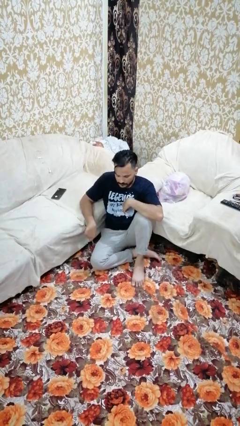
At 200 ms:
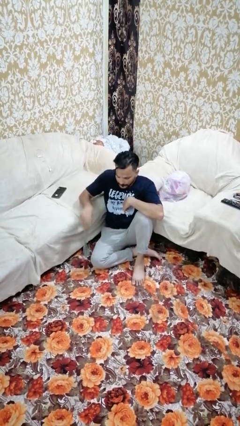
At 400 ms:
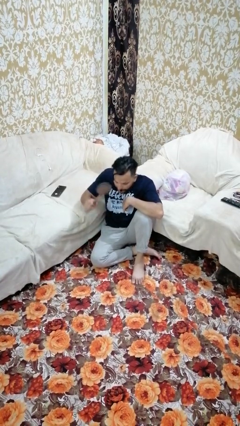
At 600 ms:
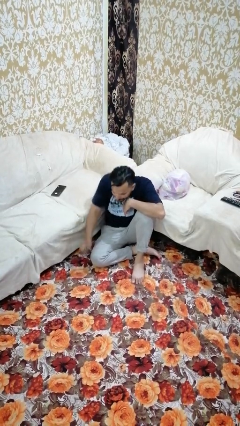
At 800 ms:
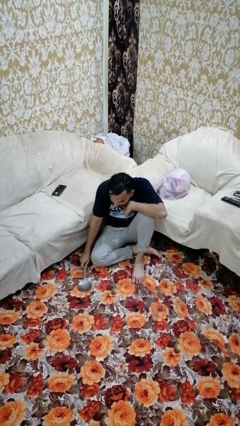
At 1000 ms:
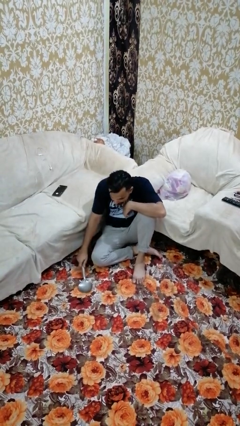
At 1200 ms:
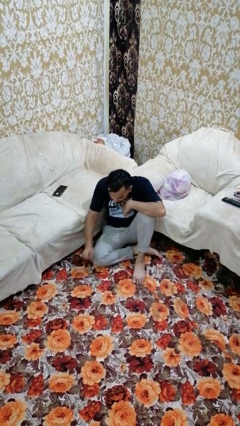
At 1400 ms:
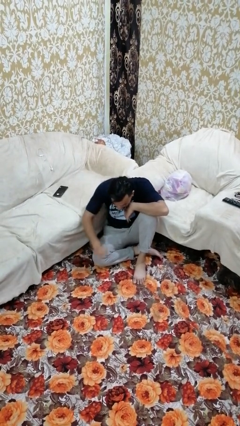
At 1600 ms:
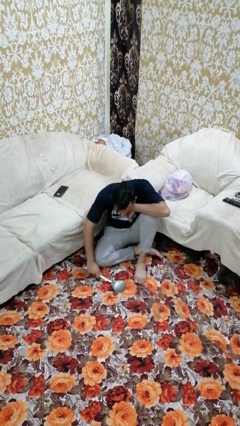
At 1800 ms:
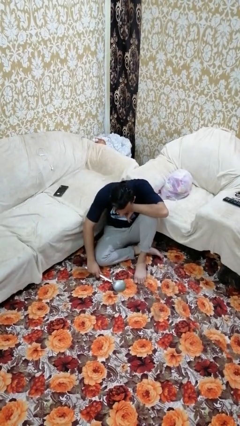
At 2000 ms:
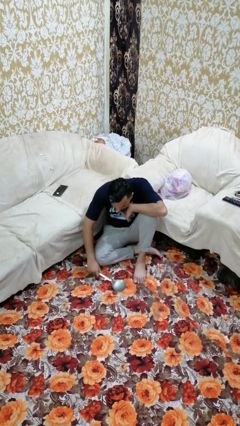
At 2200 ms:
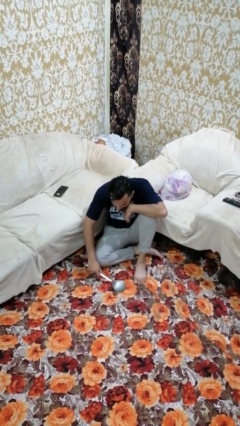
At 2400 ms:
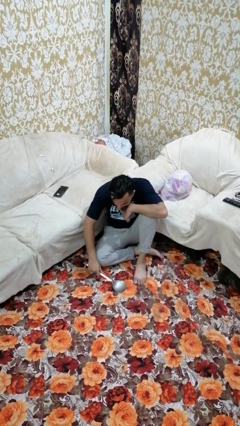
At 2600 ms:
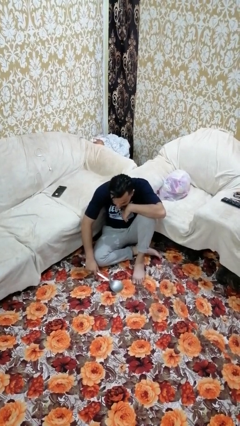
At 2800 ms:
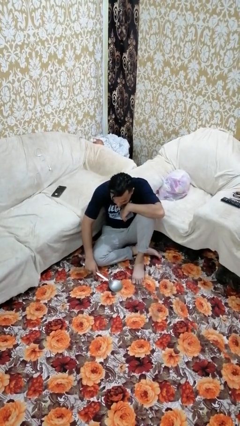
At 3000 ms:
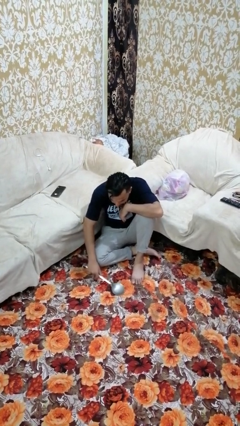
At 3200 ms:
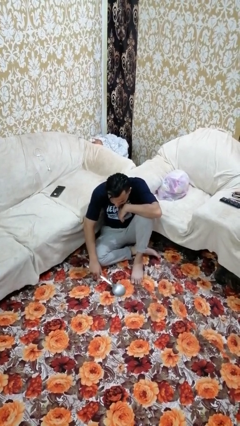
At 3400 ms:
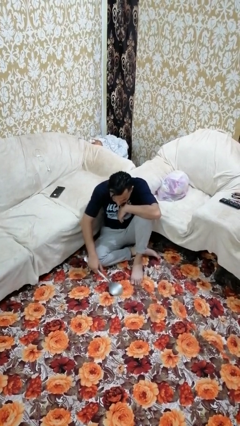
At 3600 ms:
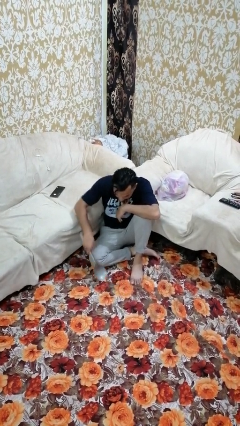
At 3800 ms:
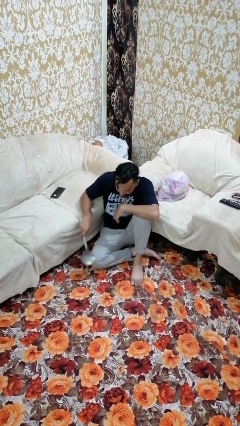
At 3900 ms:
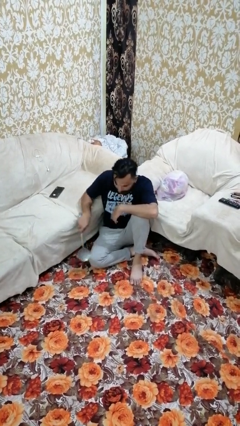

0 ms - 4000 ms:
person swats bug

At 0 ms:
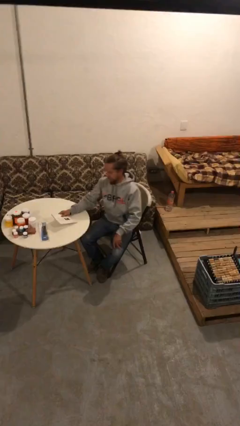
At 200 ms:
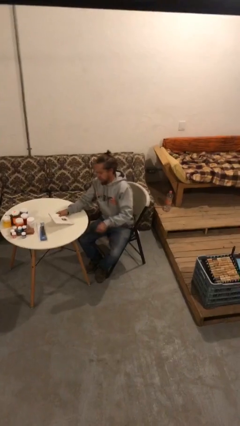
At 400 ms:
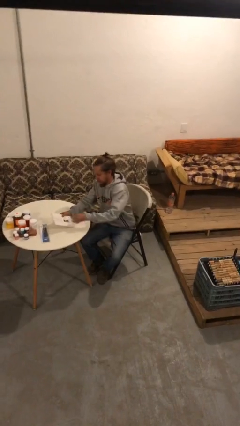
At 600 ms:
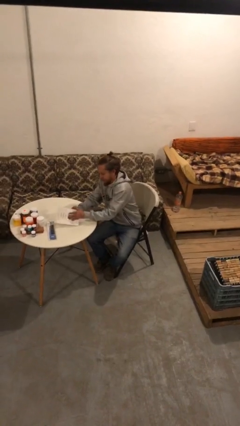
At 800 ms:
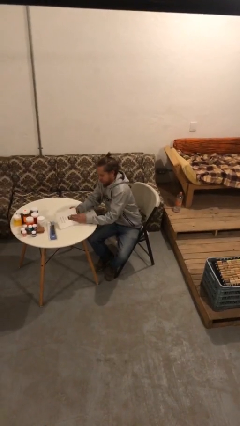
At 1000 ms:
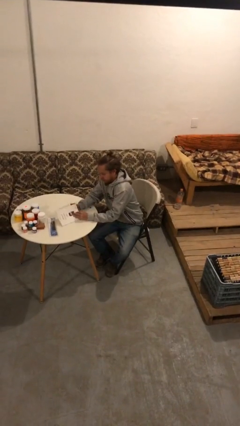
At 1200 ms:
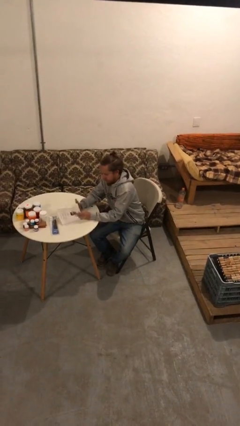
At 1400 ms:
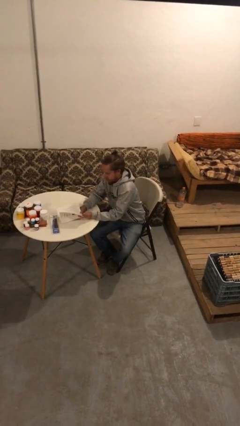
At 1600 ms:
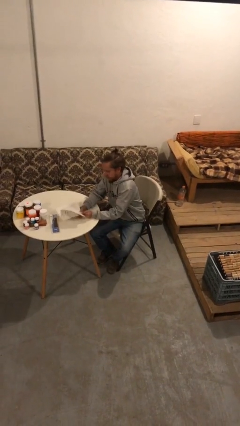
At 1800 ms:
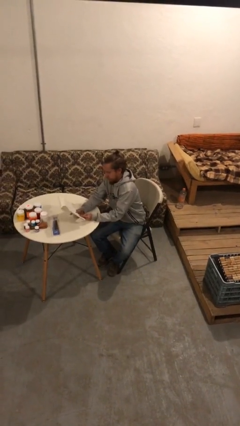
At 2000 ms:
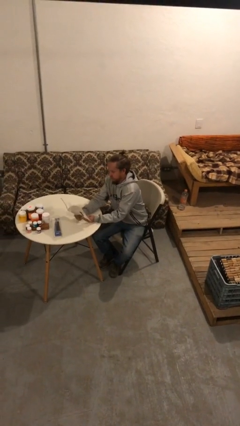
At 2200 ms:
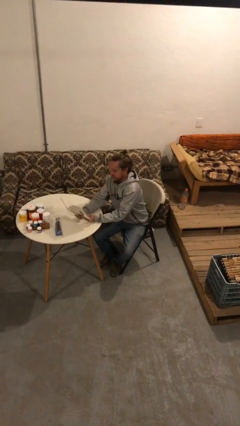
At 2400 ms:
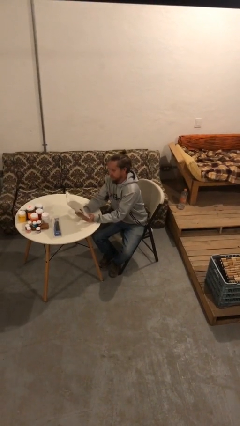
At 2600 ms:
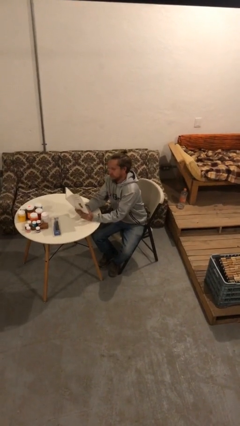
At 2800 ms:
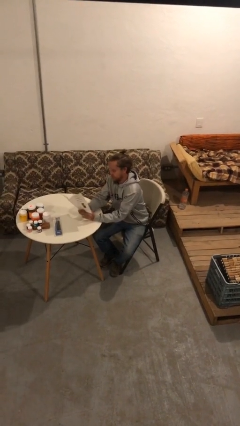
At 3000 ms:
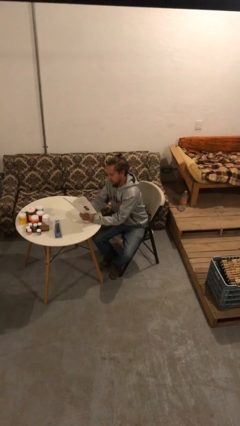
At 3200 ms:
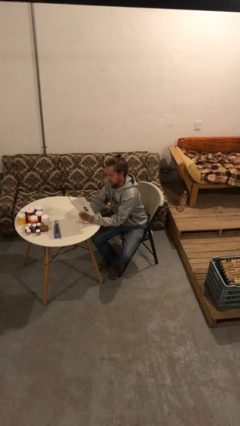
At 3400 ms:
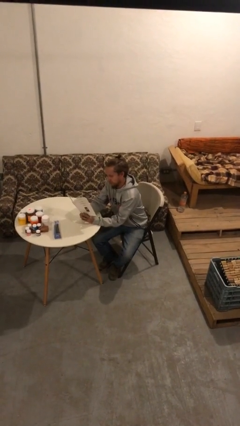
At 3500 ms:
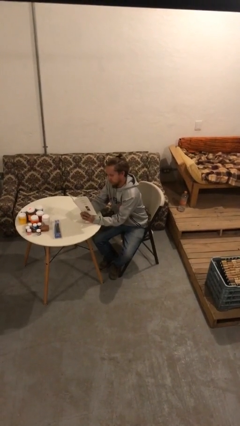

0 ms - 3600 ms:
person reads document

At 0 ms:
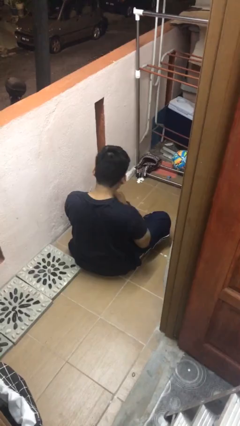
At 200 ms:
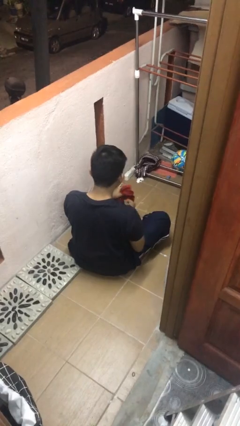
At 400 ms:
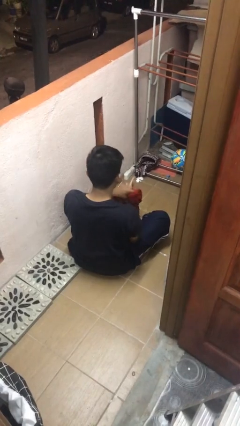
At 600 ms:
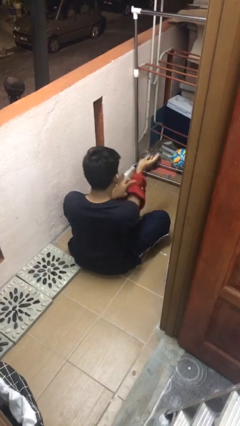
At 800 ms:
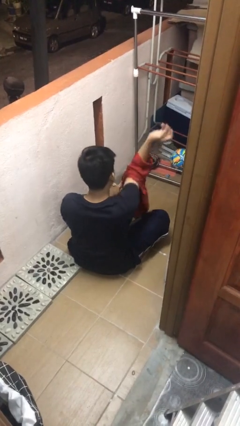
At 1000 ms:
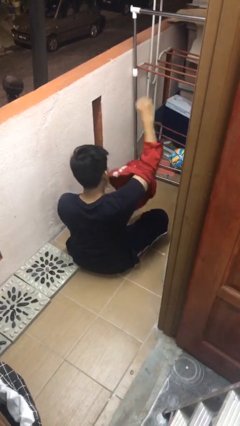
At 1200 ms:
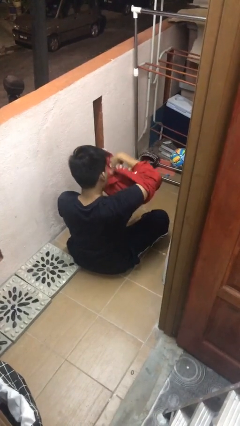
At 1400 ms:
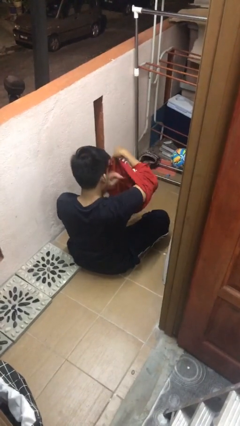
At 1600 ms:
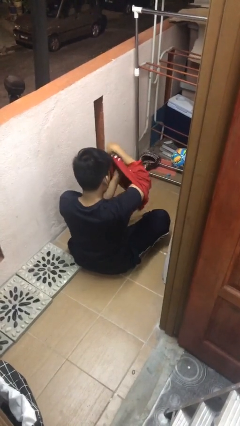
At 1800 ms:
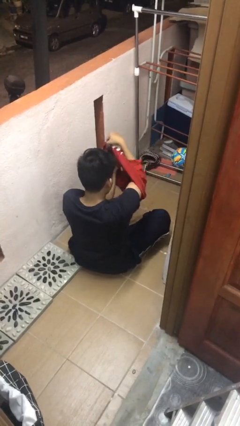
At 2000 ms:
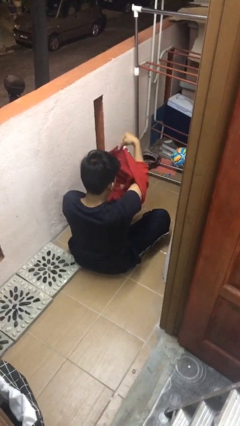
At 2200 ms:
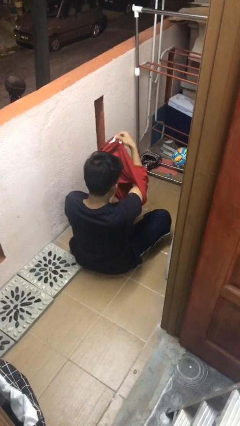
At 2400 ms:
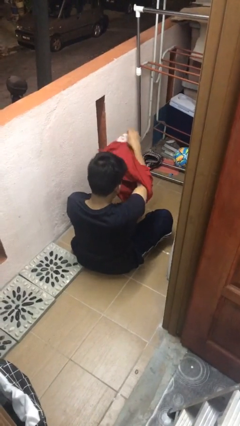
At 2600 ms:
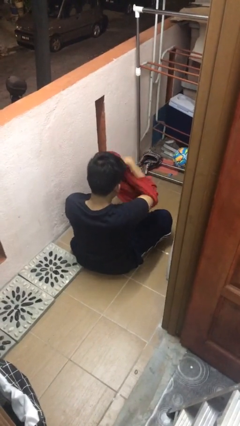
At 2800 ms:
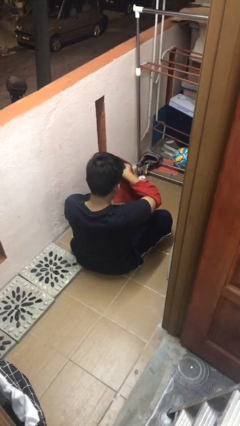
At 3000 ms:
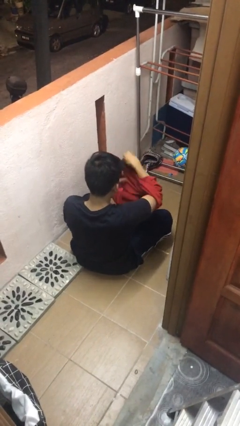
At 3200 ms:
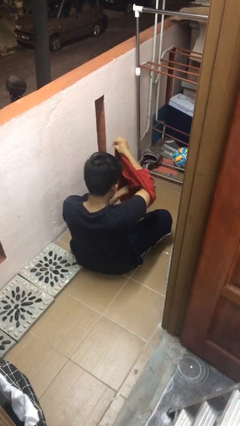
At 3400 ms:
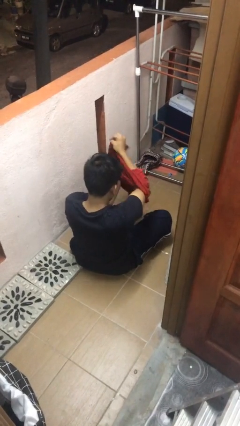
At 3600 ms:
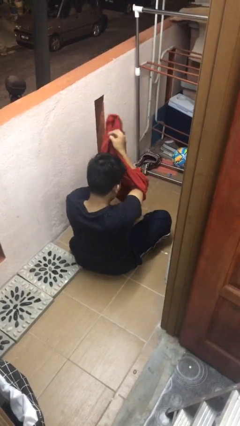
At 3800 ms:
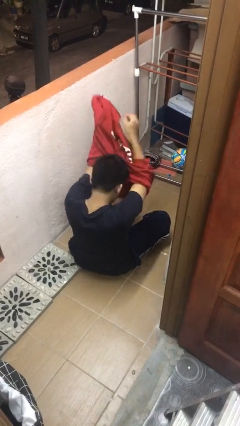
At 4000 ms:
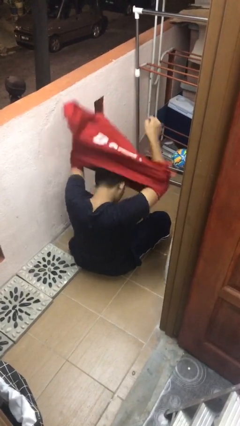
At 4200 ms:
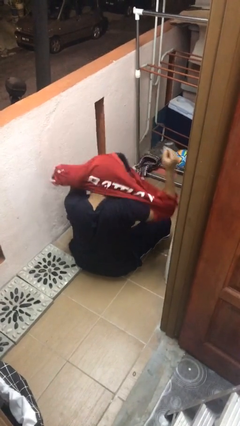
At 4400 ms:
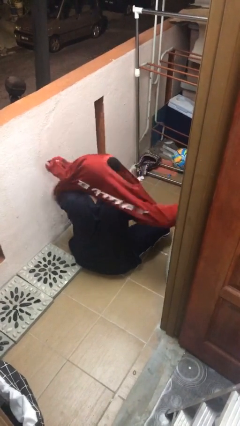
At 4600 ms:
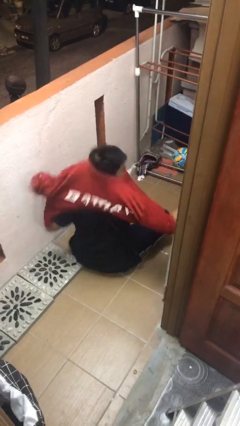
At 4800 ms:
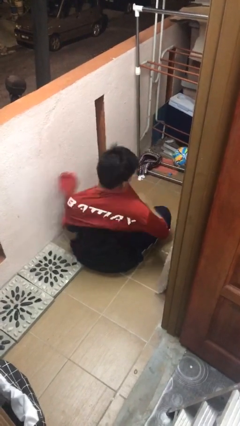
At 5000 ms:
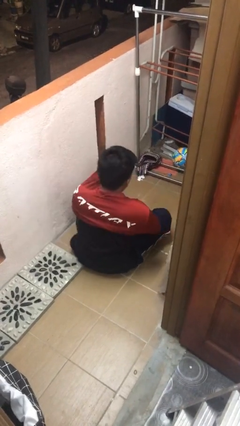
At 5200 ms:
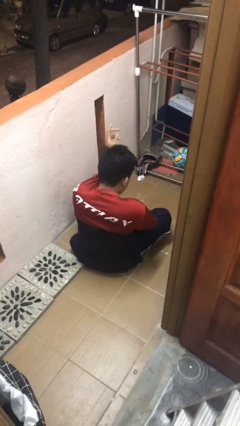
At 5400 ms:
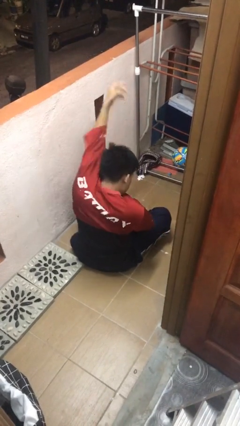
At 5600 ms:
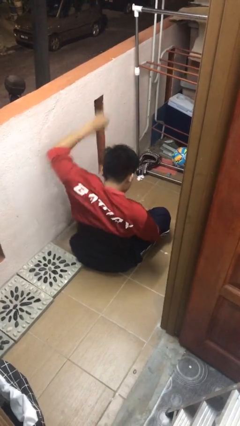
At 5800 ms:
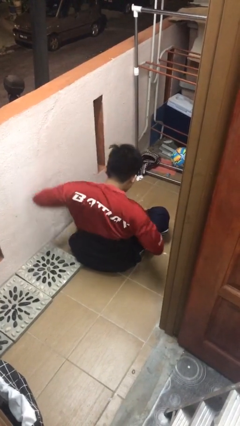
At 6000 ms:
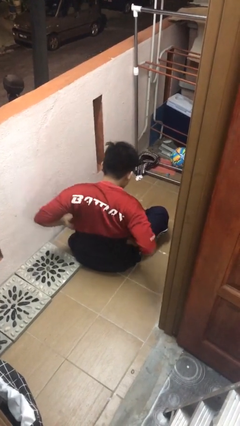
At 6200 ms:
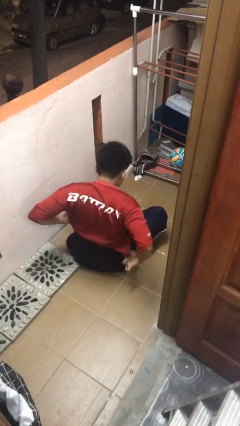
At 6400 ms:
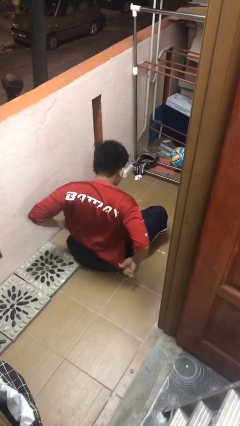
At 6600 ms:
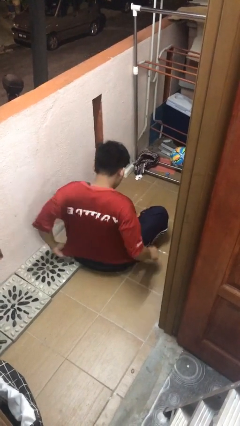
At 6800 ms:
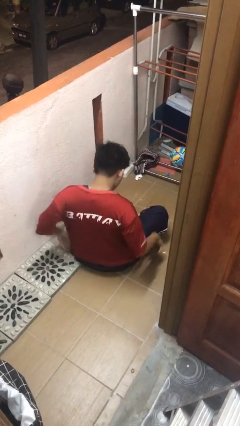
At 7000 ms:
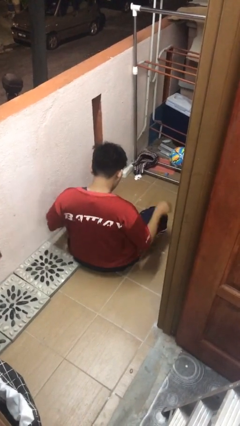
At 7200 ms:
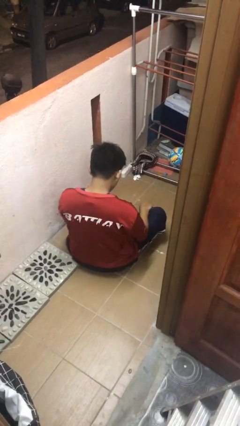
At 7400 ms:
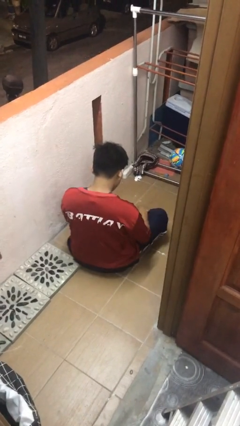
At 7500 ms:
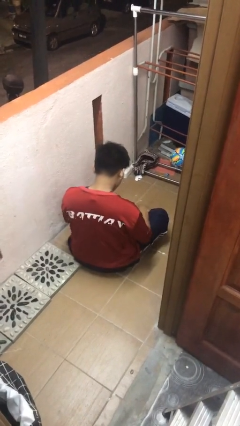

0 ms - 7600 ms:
person puts on shirt

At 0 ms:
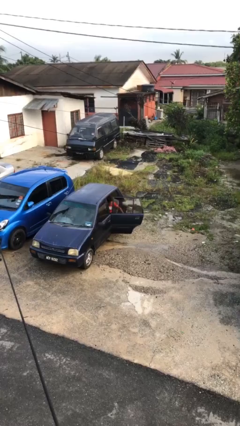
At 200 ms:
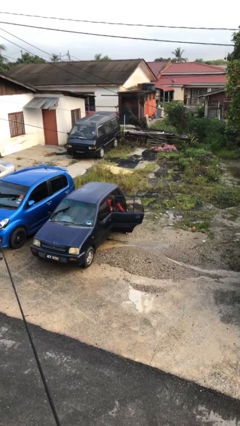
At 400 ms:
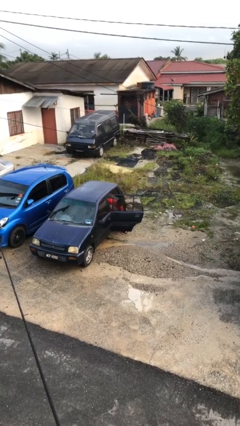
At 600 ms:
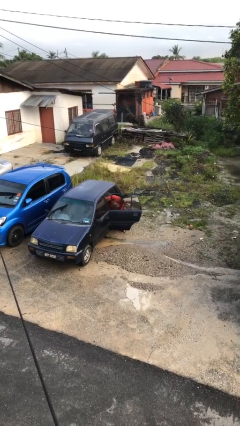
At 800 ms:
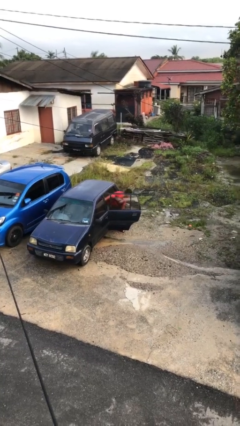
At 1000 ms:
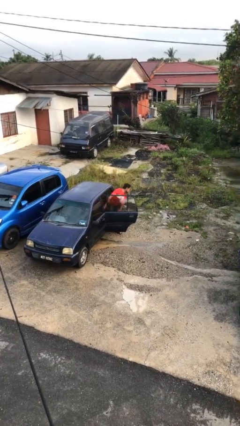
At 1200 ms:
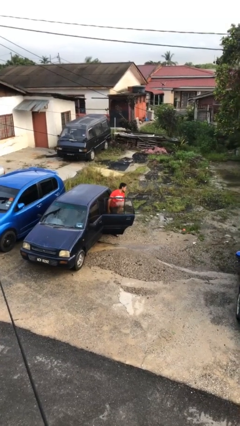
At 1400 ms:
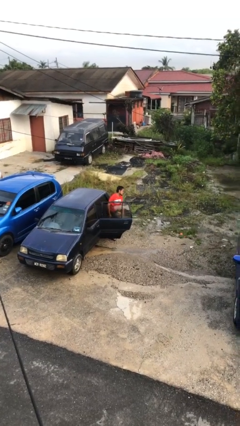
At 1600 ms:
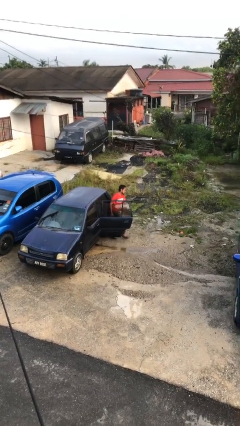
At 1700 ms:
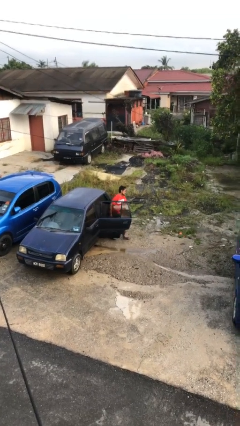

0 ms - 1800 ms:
person exits car

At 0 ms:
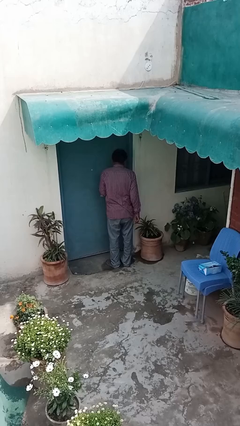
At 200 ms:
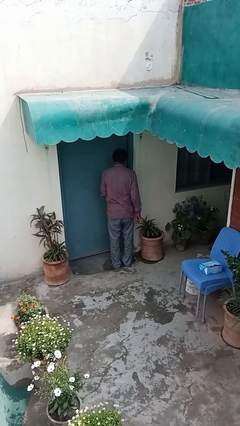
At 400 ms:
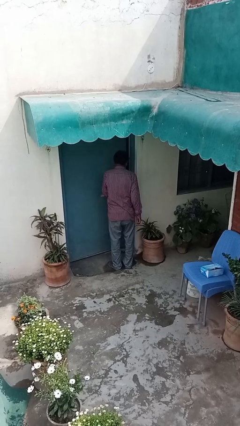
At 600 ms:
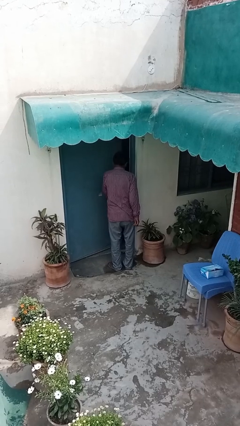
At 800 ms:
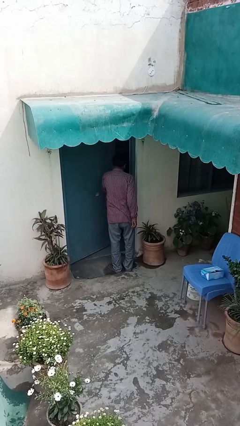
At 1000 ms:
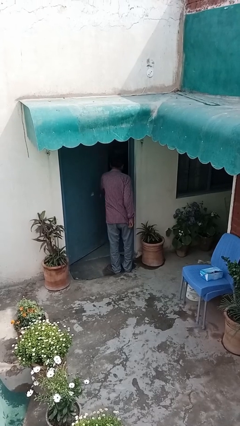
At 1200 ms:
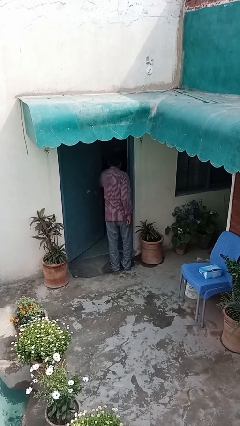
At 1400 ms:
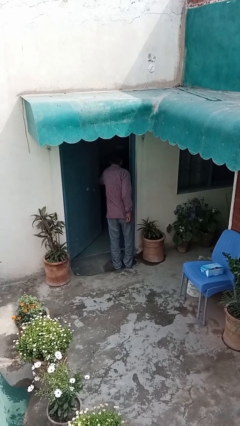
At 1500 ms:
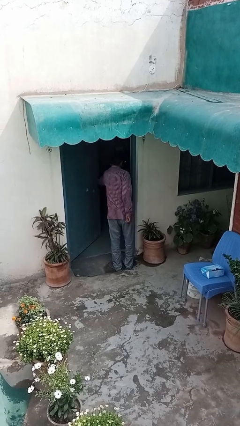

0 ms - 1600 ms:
person opens facility door
